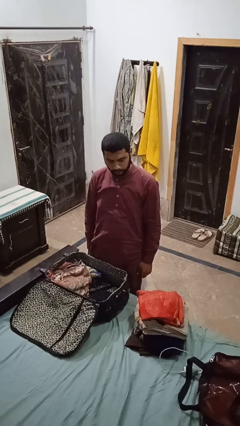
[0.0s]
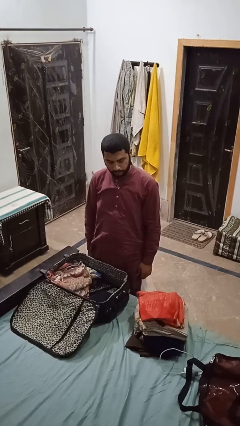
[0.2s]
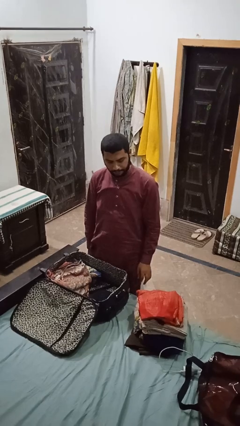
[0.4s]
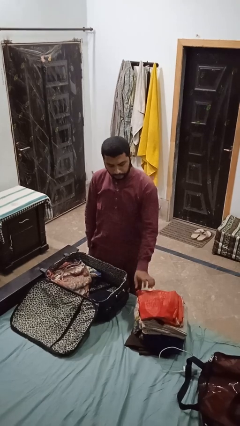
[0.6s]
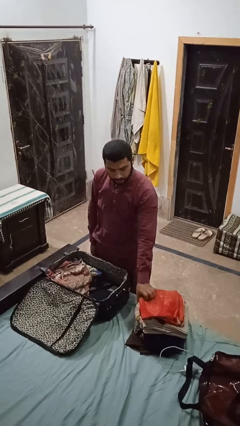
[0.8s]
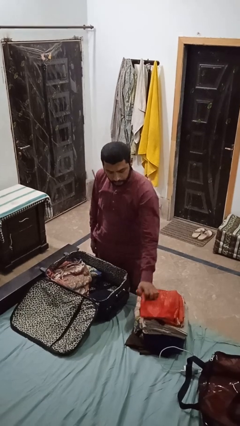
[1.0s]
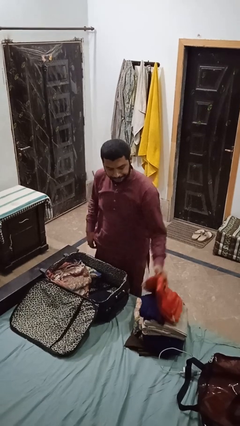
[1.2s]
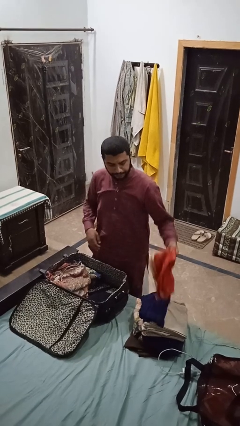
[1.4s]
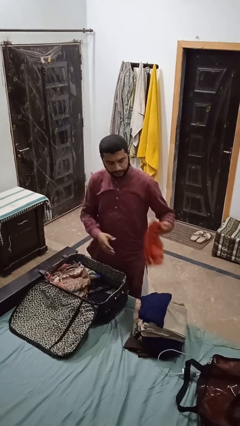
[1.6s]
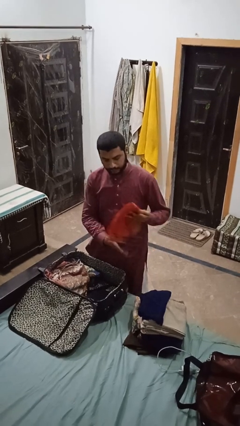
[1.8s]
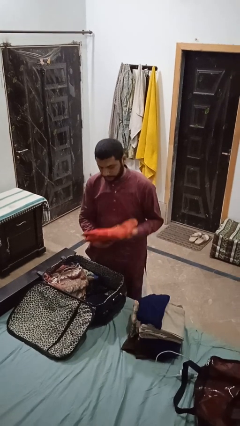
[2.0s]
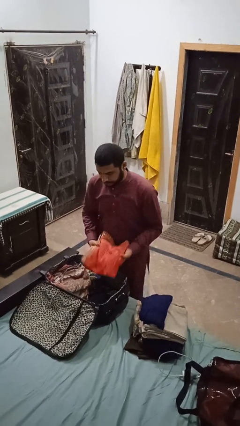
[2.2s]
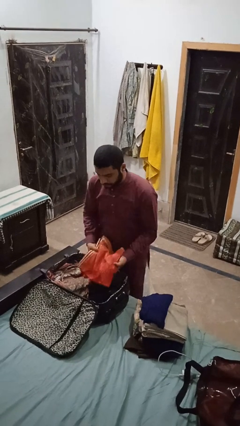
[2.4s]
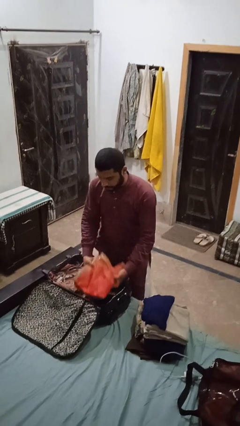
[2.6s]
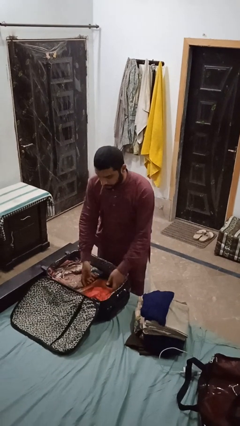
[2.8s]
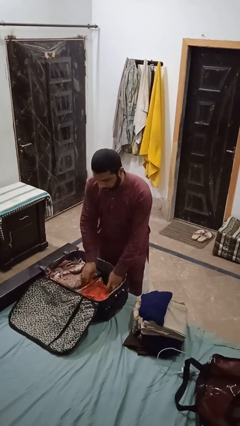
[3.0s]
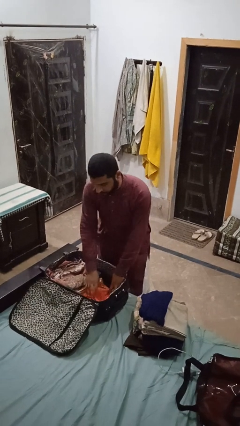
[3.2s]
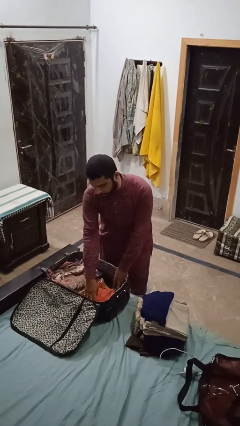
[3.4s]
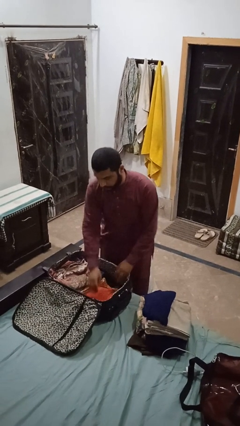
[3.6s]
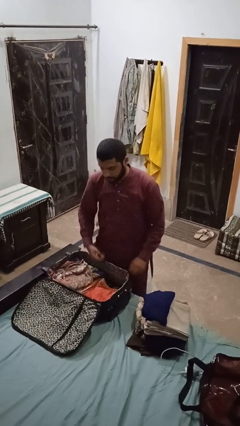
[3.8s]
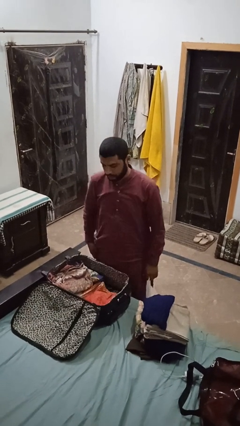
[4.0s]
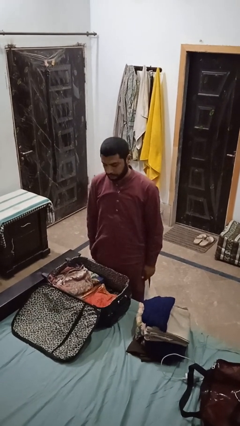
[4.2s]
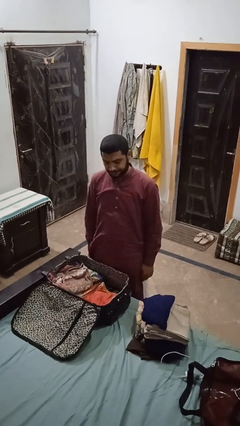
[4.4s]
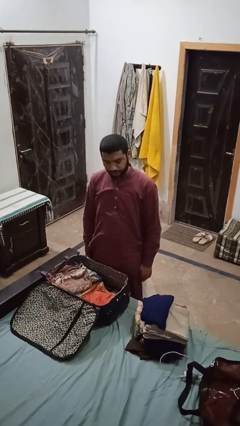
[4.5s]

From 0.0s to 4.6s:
person loads clothes into suitcase

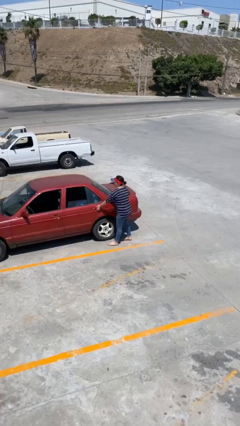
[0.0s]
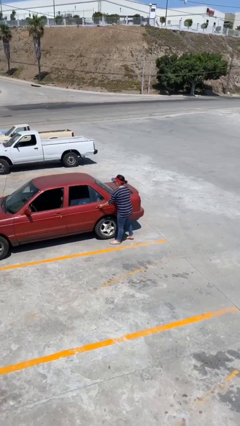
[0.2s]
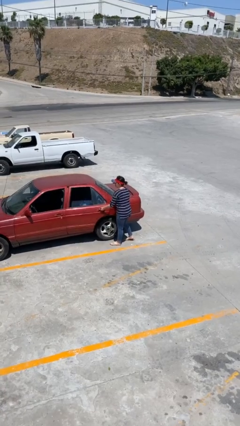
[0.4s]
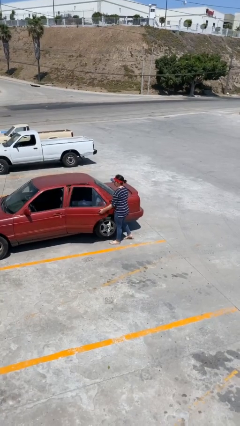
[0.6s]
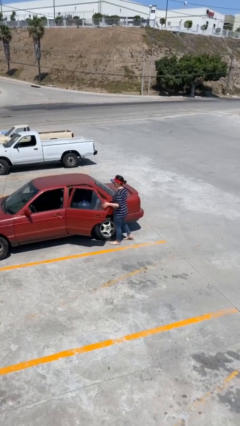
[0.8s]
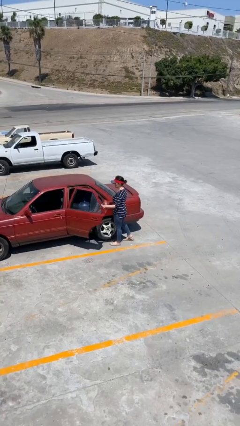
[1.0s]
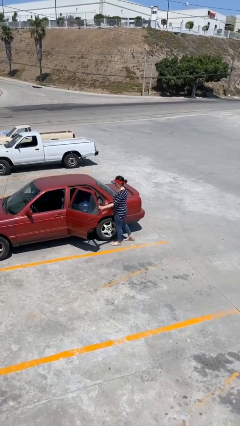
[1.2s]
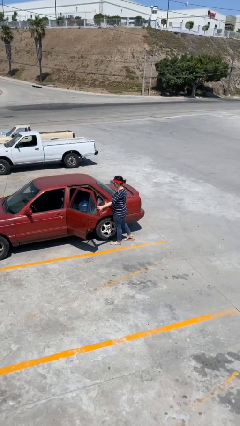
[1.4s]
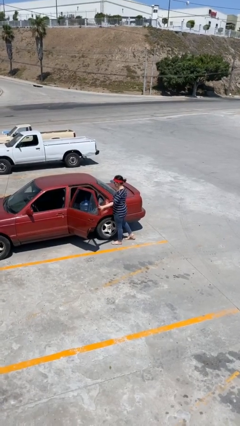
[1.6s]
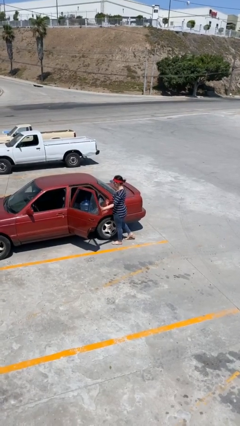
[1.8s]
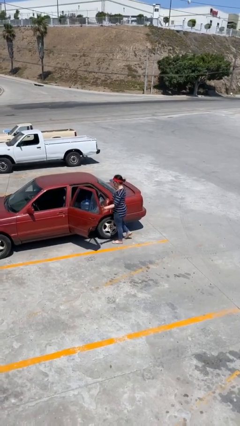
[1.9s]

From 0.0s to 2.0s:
person opens car door

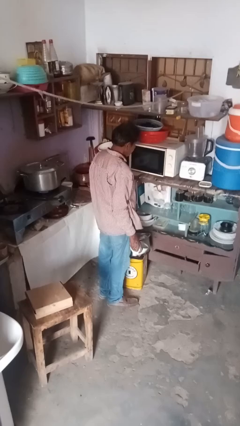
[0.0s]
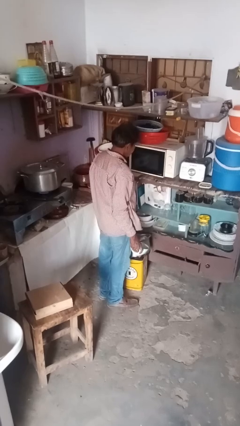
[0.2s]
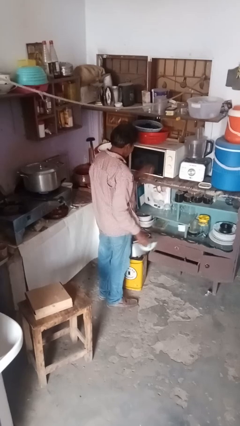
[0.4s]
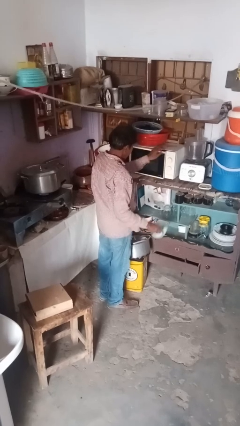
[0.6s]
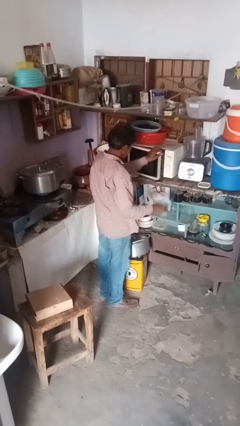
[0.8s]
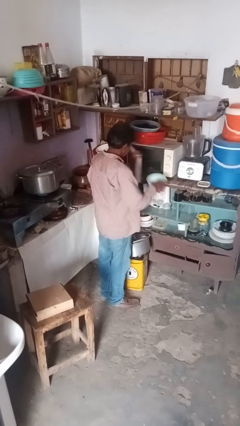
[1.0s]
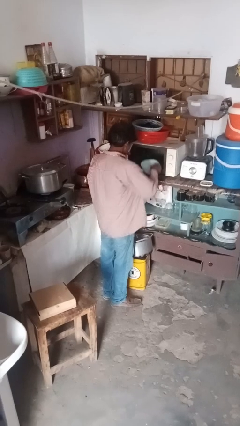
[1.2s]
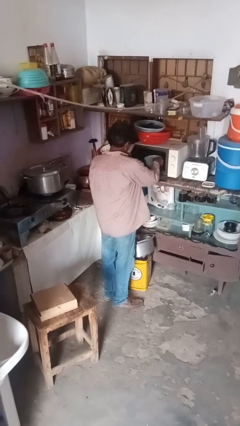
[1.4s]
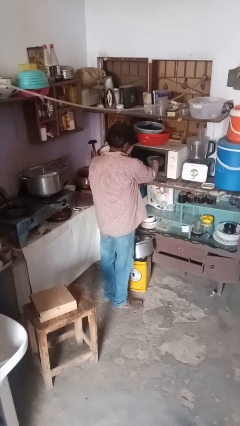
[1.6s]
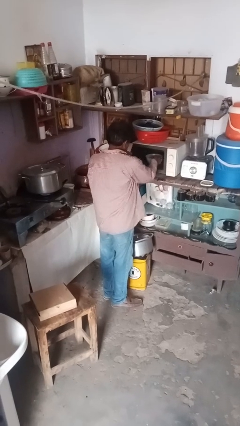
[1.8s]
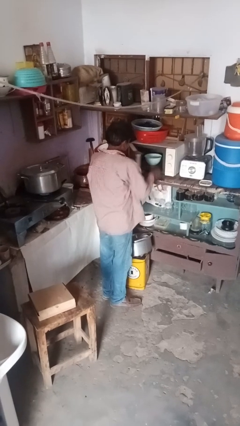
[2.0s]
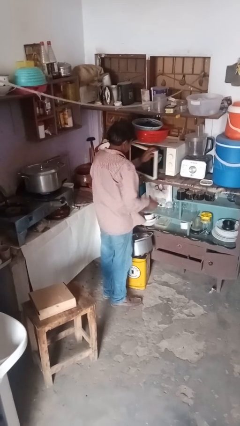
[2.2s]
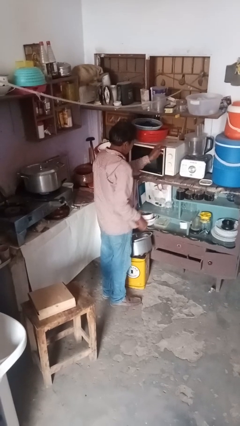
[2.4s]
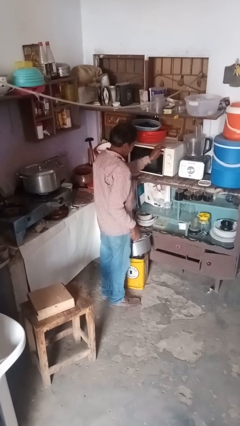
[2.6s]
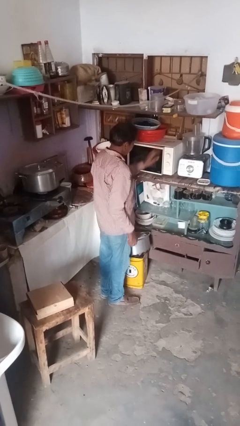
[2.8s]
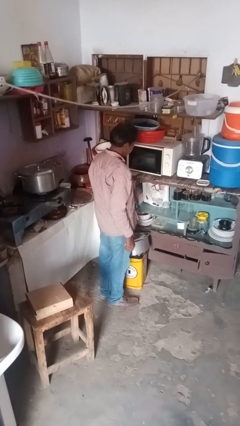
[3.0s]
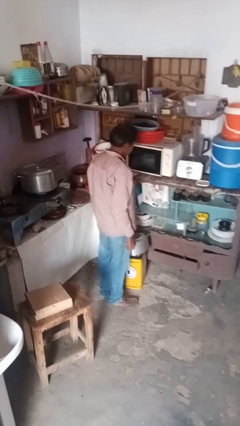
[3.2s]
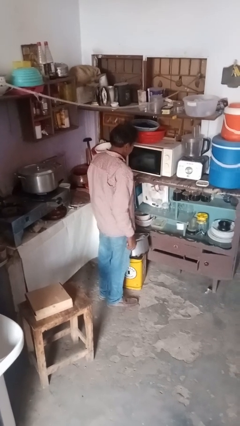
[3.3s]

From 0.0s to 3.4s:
person puts object into microwave

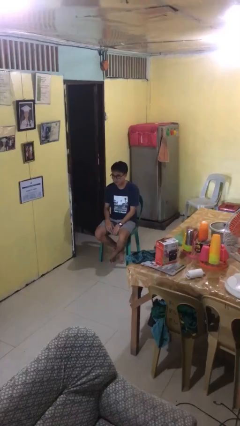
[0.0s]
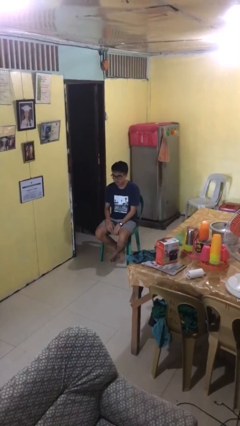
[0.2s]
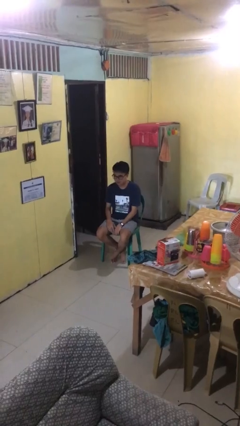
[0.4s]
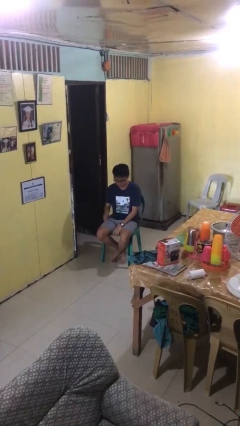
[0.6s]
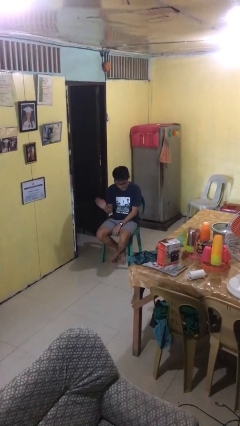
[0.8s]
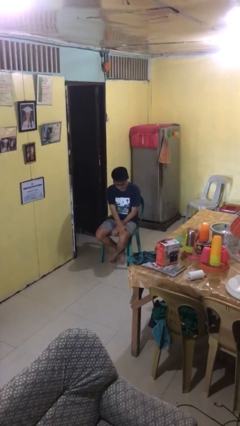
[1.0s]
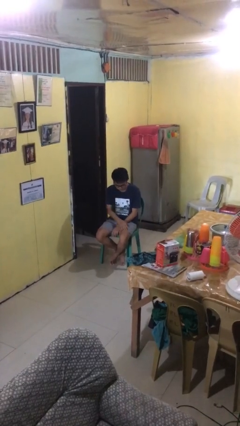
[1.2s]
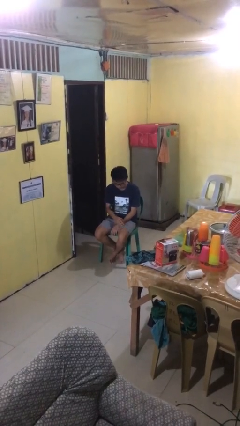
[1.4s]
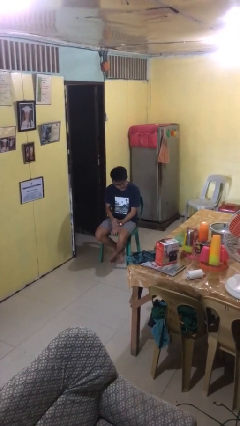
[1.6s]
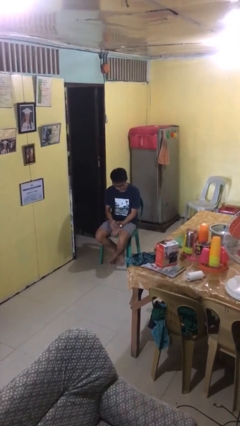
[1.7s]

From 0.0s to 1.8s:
person swats bug

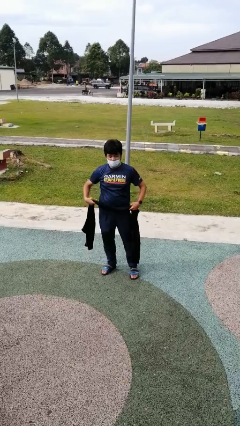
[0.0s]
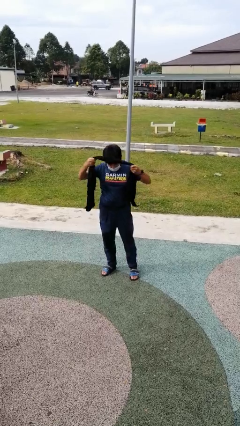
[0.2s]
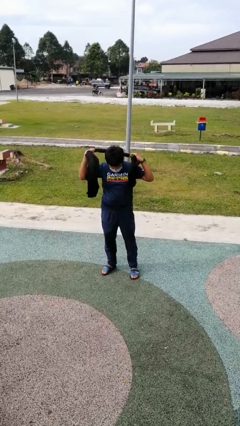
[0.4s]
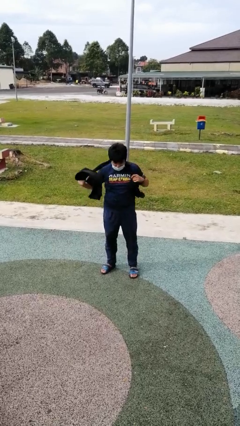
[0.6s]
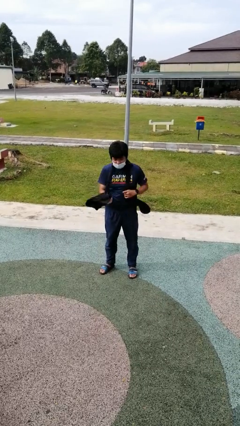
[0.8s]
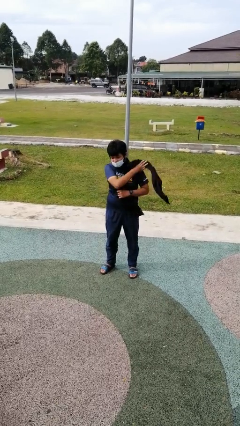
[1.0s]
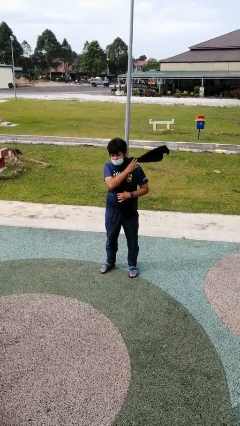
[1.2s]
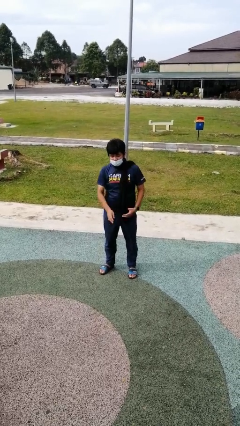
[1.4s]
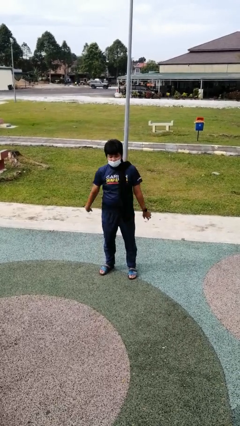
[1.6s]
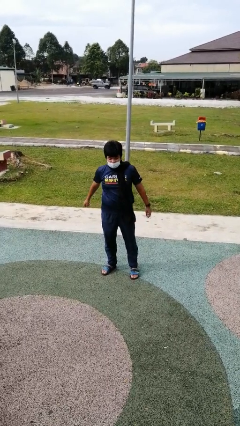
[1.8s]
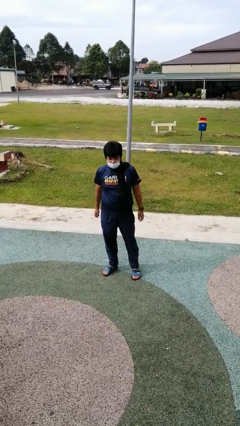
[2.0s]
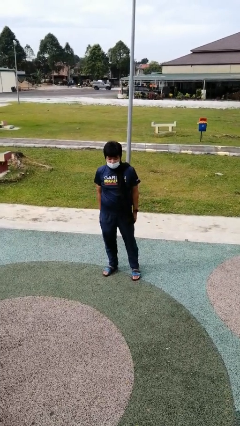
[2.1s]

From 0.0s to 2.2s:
person puts on scarf

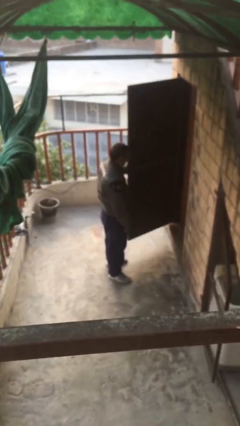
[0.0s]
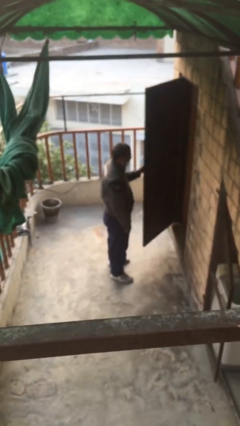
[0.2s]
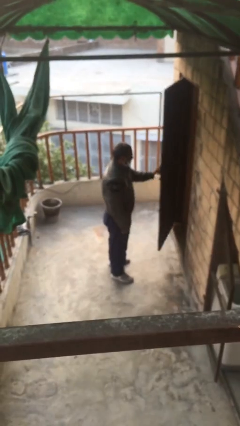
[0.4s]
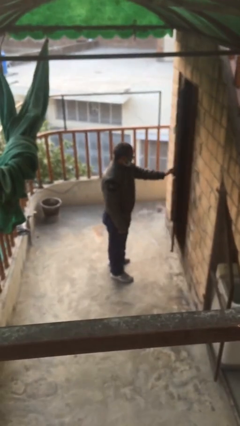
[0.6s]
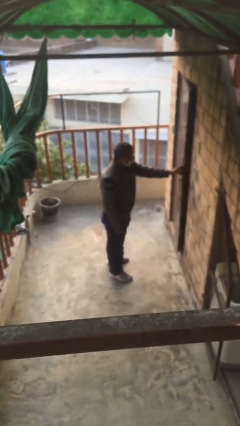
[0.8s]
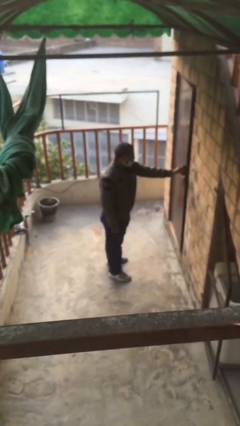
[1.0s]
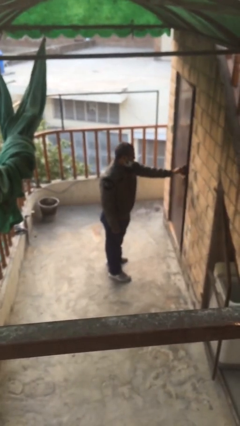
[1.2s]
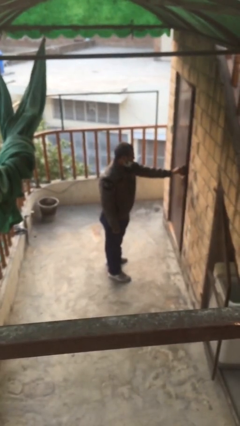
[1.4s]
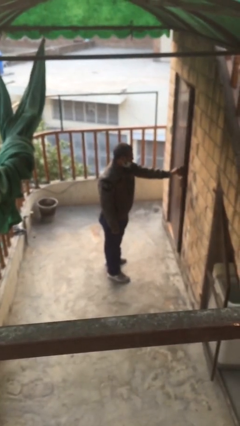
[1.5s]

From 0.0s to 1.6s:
person closes facility door

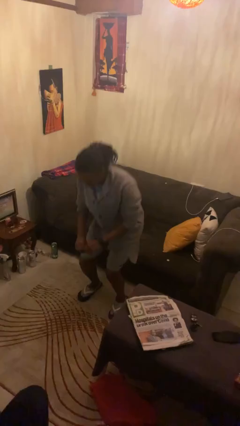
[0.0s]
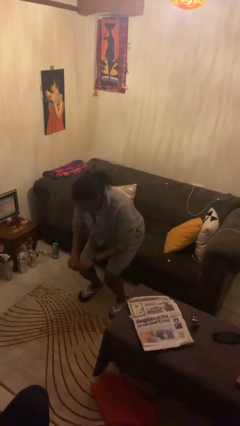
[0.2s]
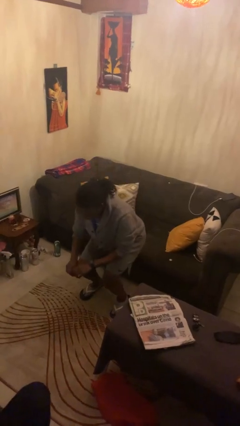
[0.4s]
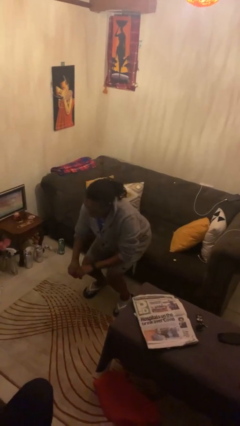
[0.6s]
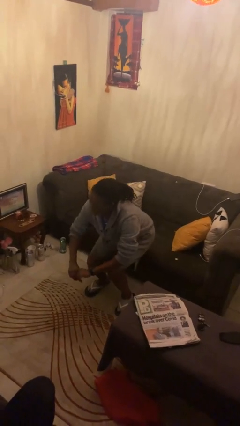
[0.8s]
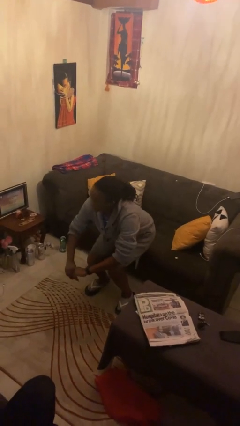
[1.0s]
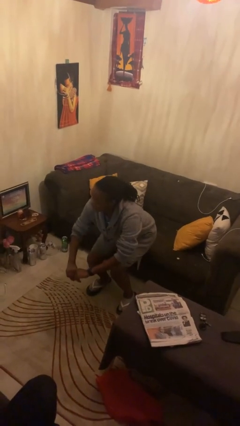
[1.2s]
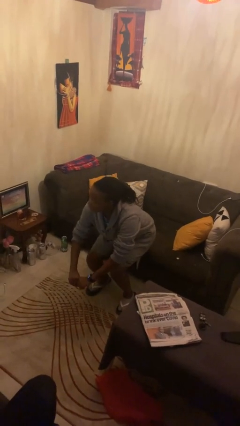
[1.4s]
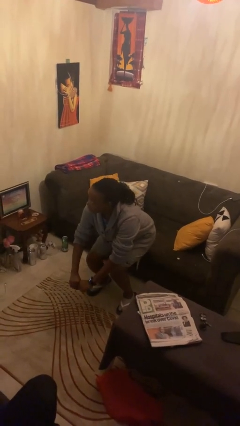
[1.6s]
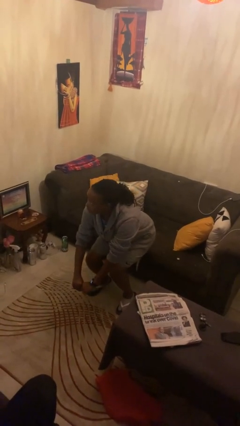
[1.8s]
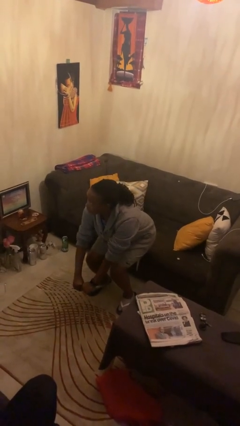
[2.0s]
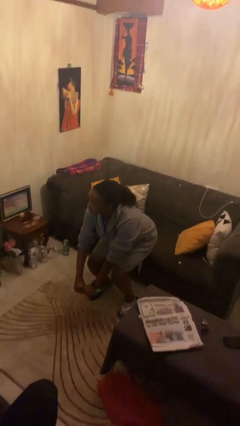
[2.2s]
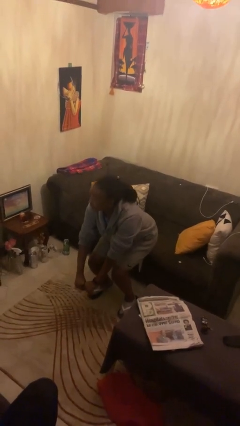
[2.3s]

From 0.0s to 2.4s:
person squats
